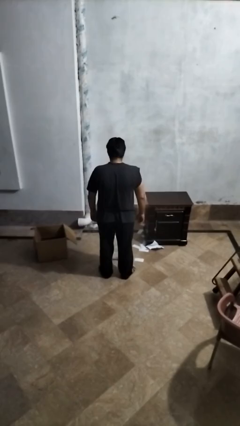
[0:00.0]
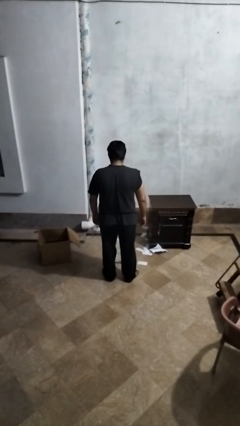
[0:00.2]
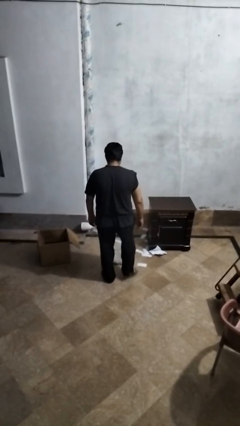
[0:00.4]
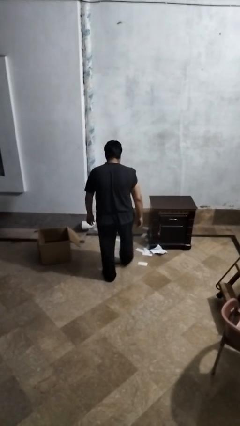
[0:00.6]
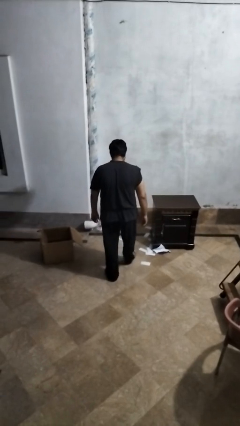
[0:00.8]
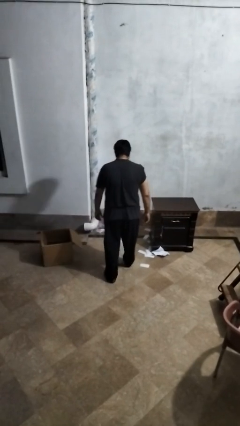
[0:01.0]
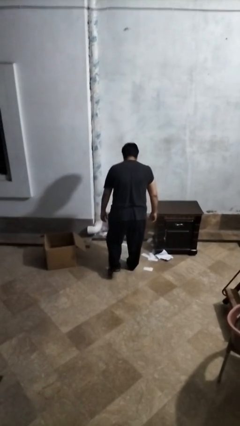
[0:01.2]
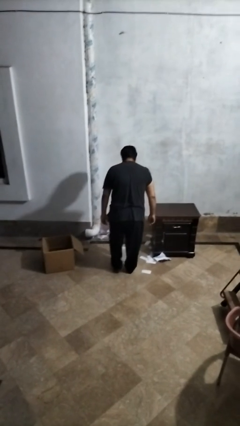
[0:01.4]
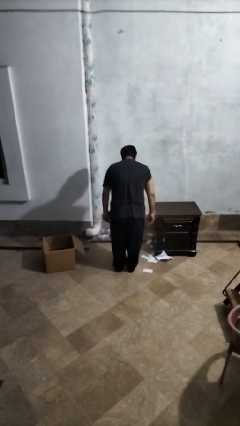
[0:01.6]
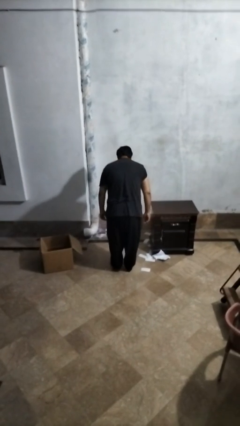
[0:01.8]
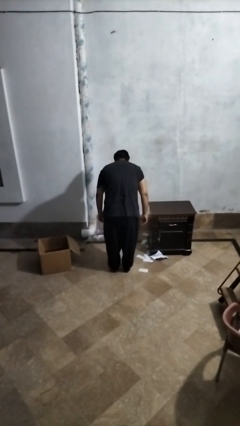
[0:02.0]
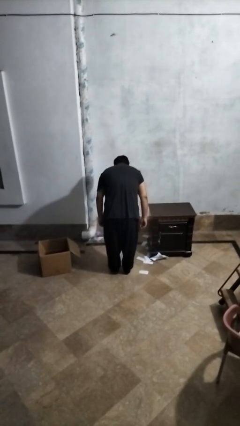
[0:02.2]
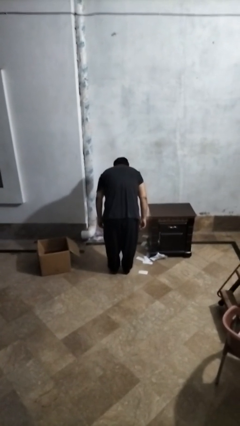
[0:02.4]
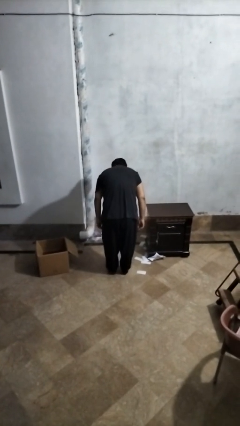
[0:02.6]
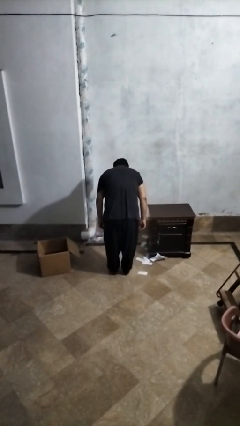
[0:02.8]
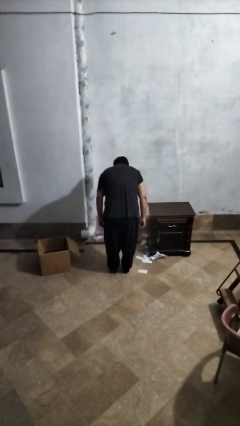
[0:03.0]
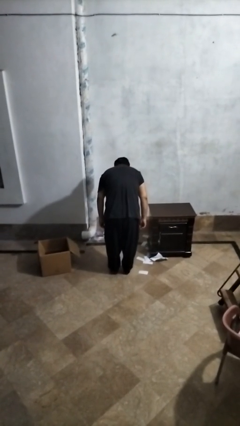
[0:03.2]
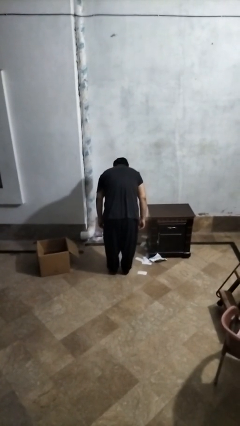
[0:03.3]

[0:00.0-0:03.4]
person uses bodyweight scale

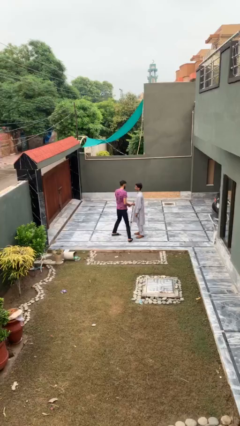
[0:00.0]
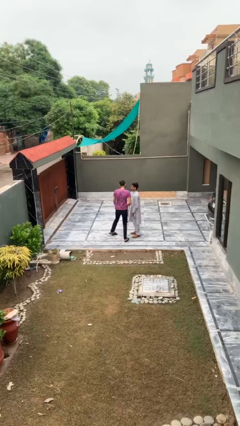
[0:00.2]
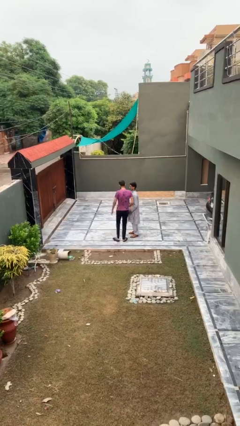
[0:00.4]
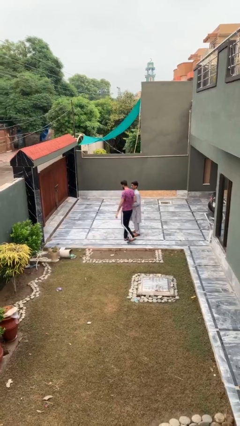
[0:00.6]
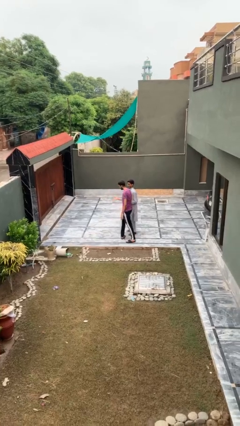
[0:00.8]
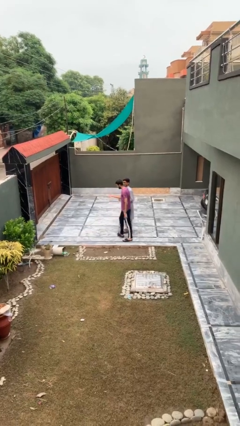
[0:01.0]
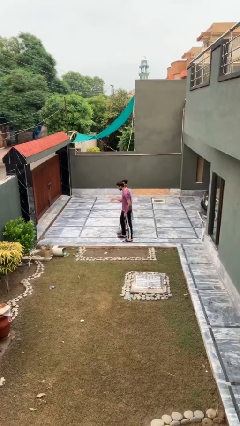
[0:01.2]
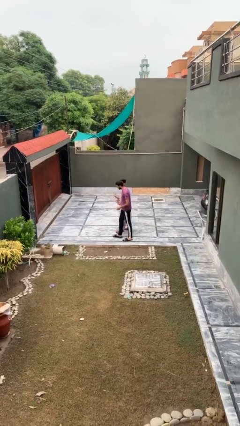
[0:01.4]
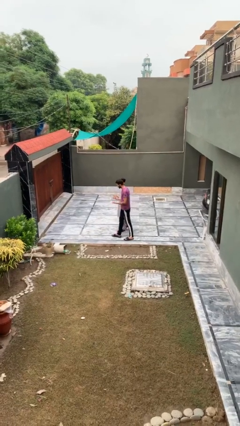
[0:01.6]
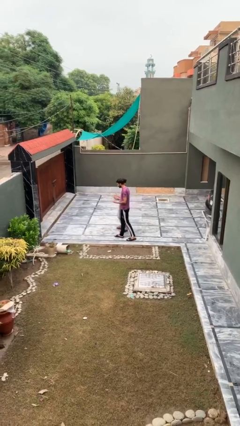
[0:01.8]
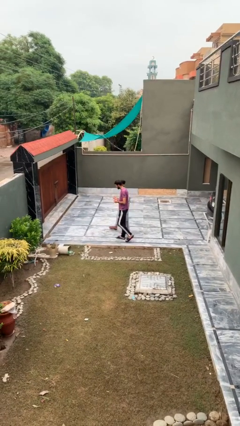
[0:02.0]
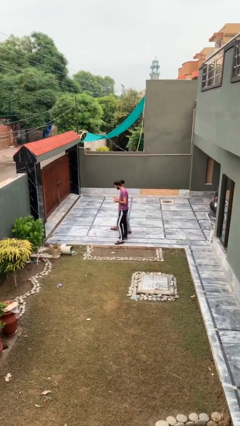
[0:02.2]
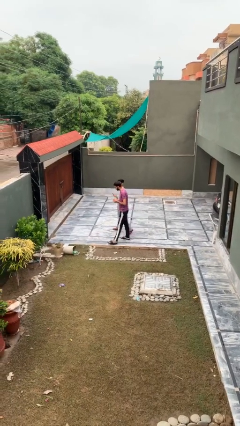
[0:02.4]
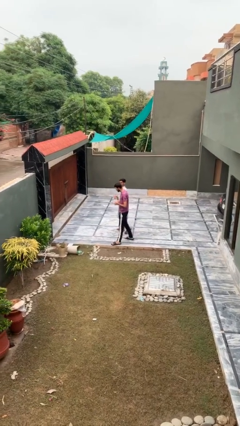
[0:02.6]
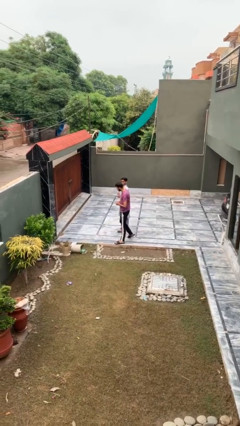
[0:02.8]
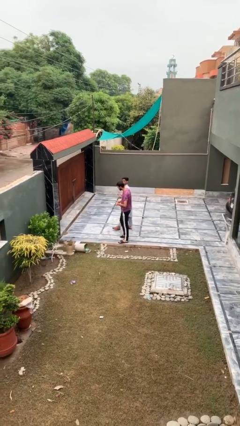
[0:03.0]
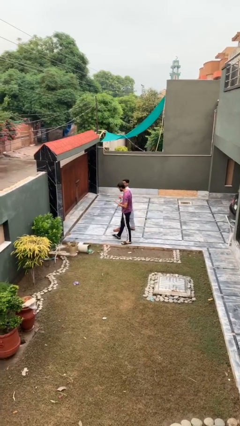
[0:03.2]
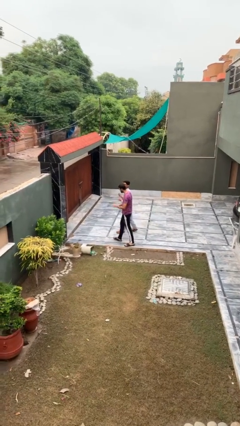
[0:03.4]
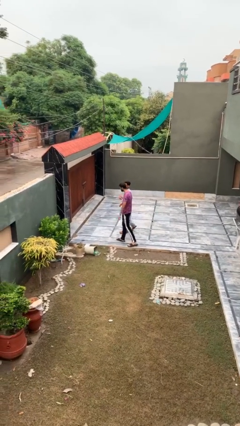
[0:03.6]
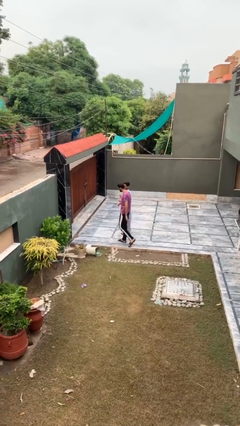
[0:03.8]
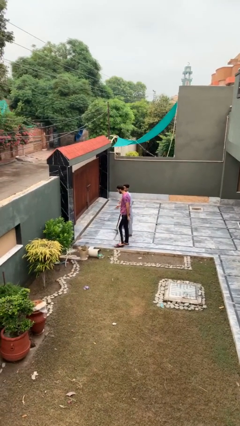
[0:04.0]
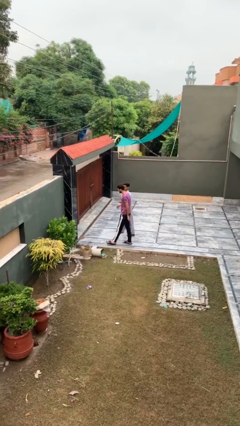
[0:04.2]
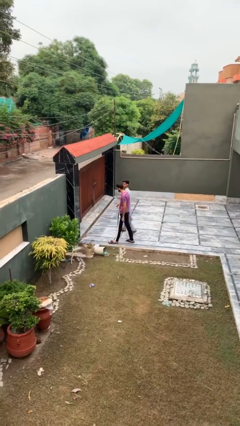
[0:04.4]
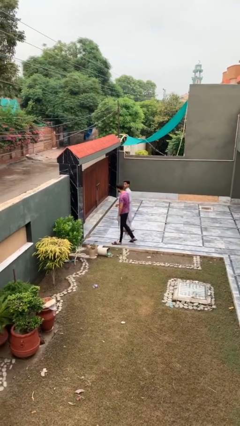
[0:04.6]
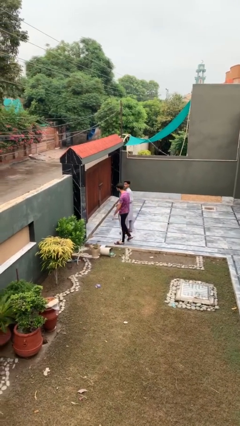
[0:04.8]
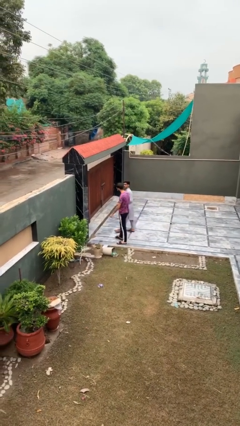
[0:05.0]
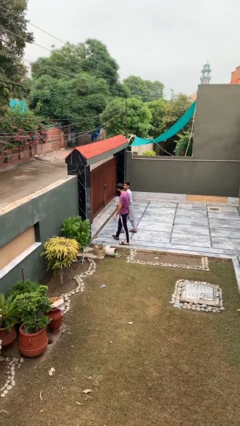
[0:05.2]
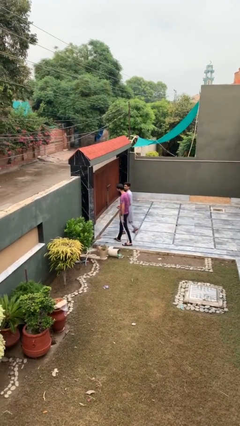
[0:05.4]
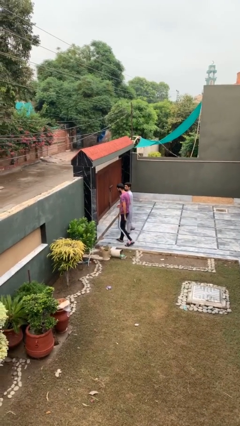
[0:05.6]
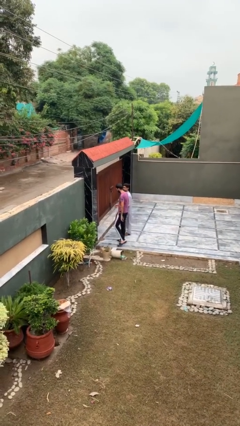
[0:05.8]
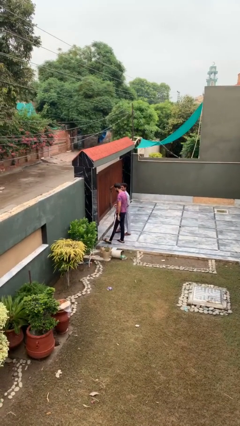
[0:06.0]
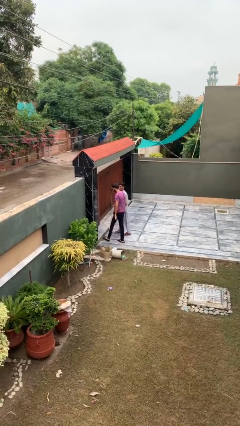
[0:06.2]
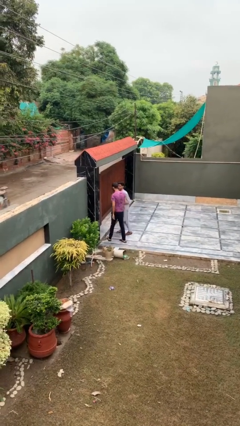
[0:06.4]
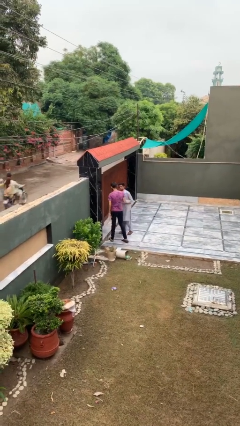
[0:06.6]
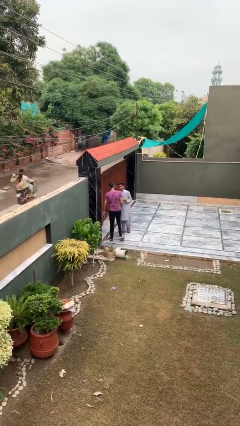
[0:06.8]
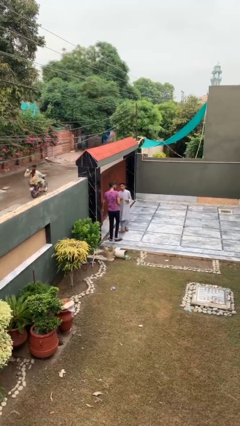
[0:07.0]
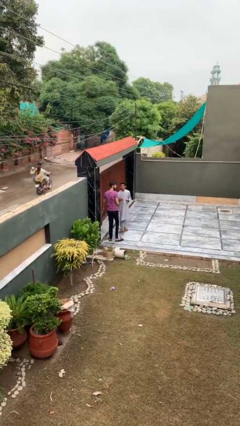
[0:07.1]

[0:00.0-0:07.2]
person talks to person

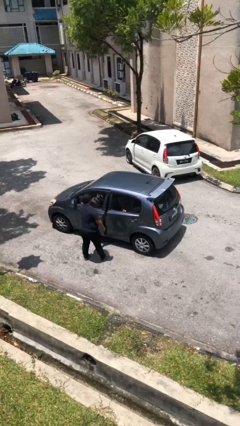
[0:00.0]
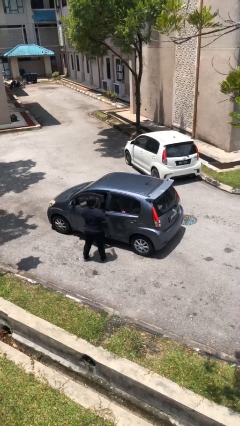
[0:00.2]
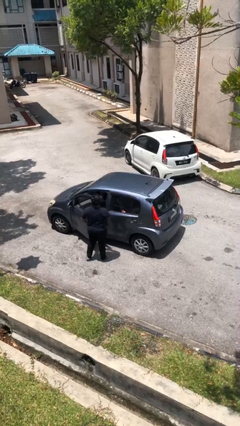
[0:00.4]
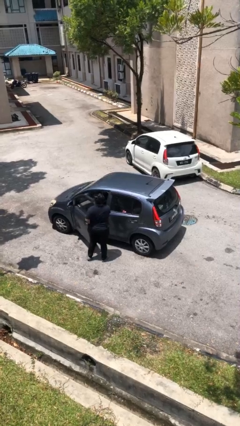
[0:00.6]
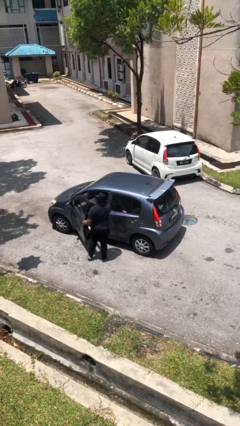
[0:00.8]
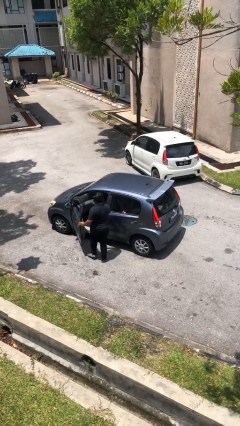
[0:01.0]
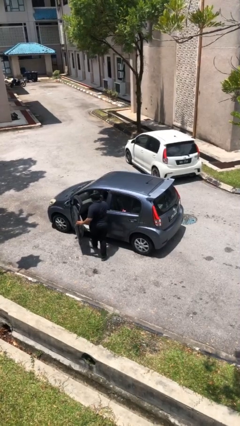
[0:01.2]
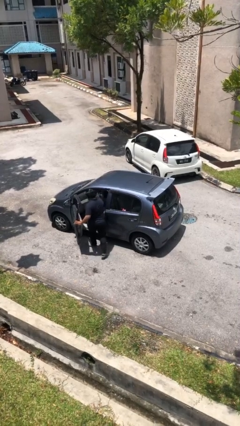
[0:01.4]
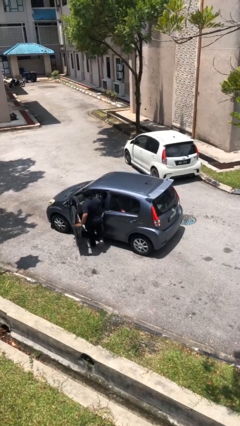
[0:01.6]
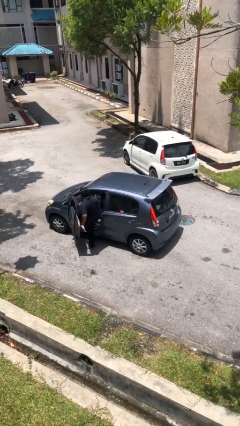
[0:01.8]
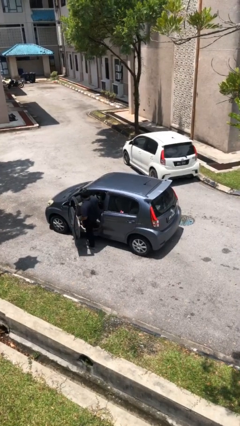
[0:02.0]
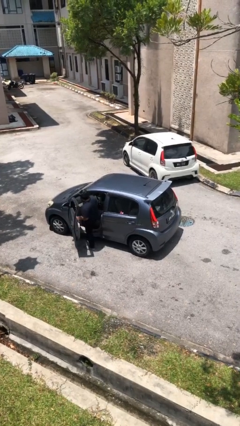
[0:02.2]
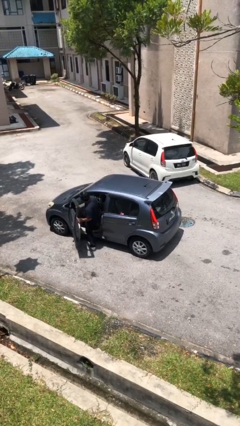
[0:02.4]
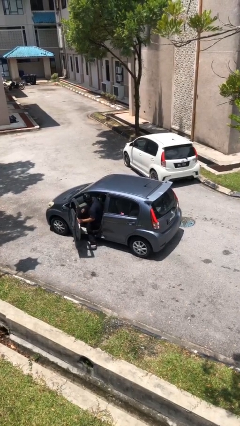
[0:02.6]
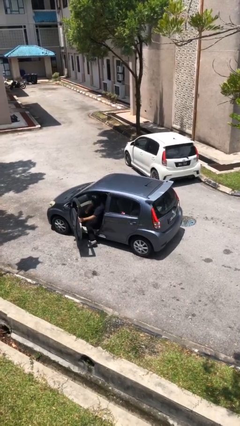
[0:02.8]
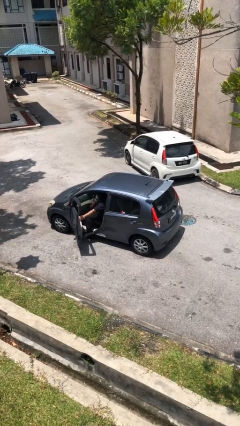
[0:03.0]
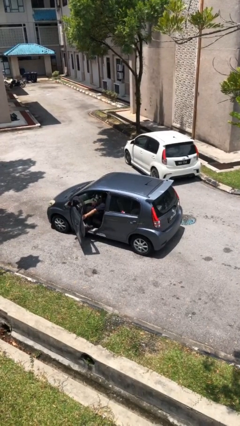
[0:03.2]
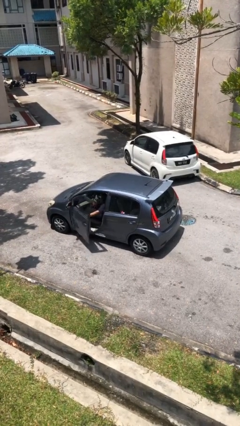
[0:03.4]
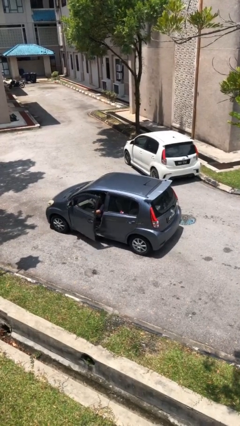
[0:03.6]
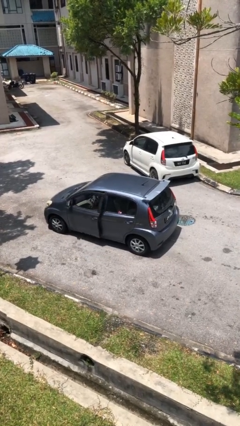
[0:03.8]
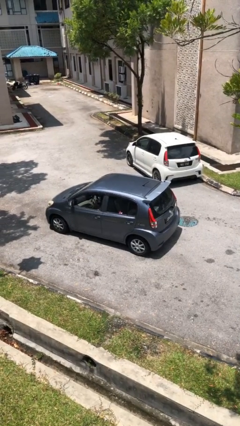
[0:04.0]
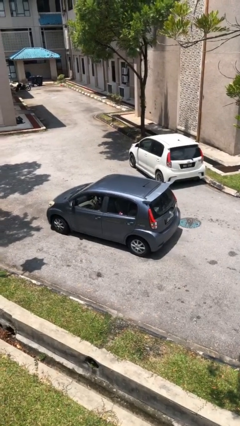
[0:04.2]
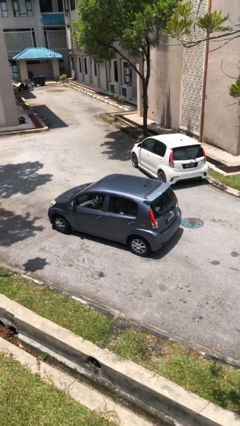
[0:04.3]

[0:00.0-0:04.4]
car picks up person

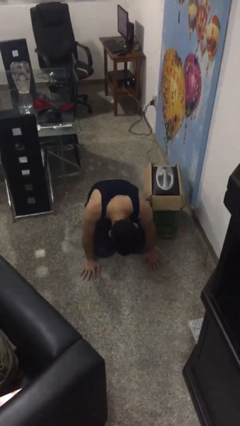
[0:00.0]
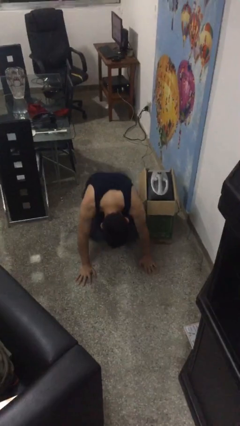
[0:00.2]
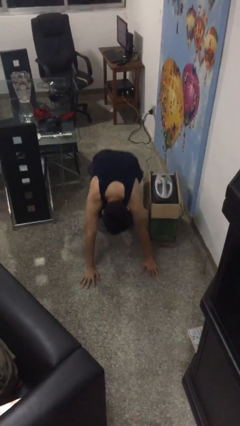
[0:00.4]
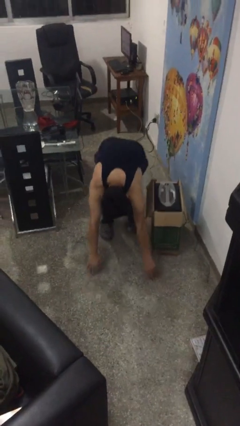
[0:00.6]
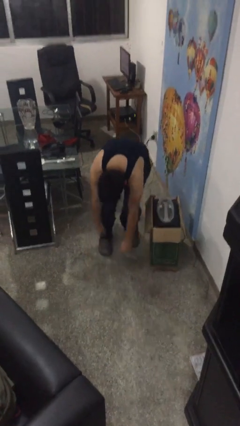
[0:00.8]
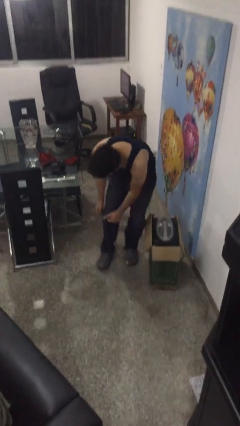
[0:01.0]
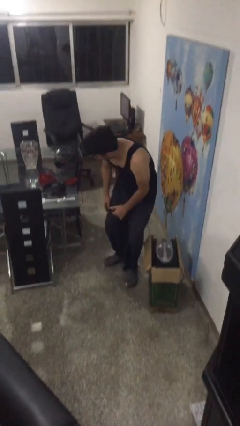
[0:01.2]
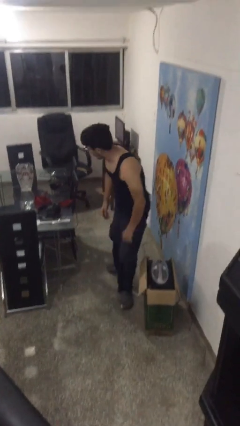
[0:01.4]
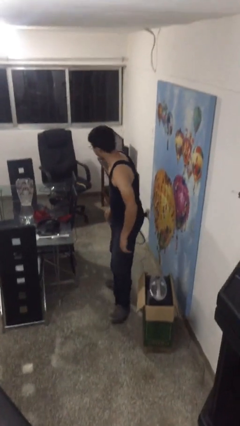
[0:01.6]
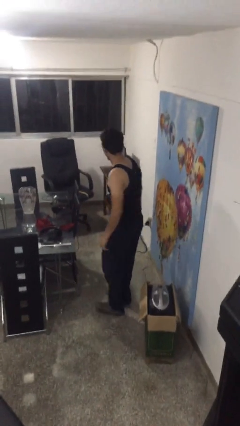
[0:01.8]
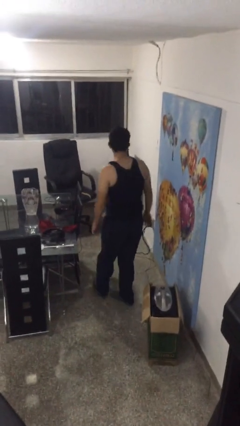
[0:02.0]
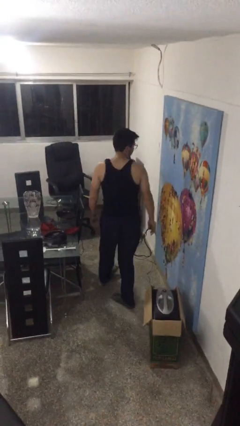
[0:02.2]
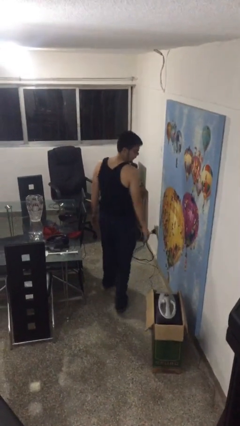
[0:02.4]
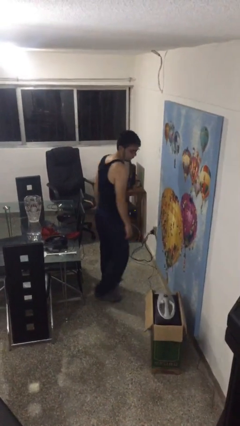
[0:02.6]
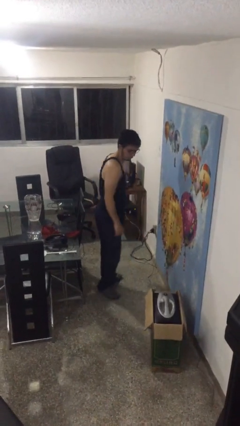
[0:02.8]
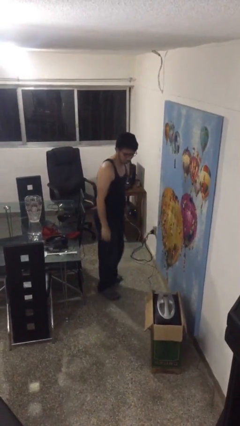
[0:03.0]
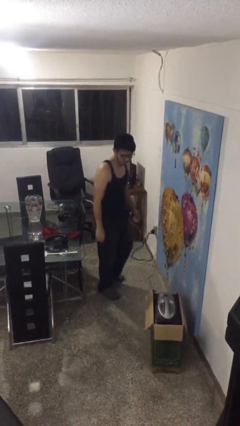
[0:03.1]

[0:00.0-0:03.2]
person stands up from floor
